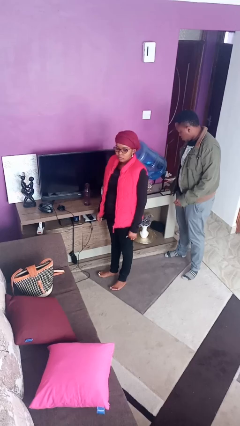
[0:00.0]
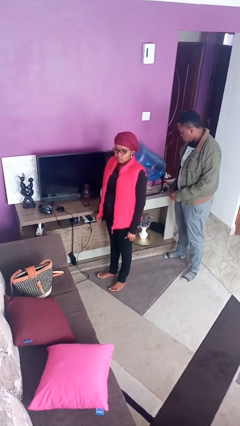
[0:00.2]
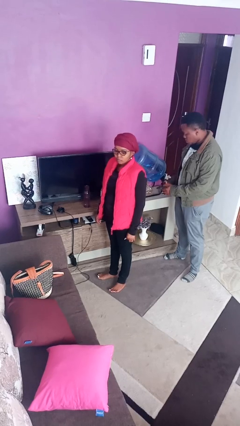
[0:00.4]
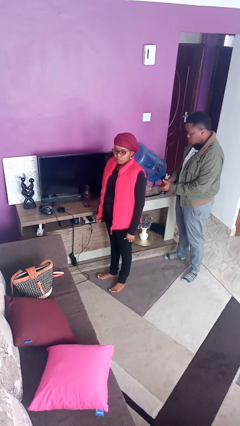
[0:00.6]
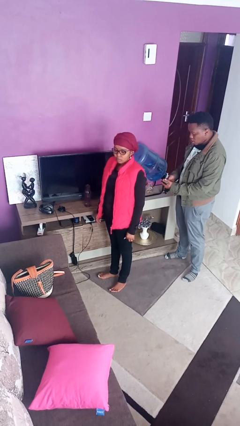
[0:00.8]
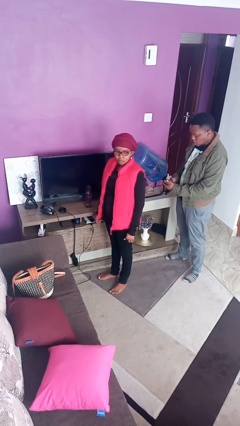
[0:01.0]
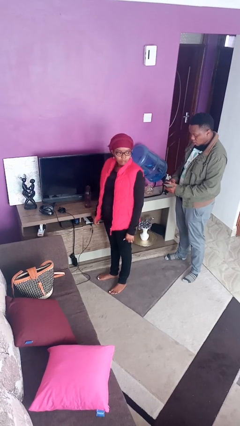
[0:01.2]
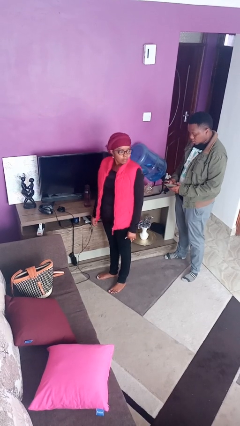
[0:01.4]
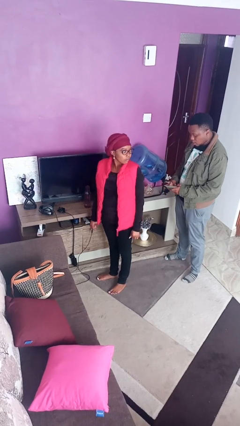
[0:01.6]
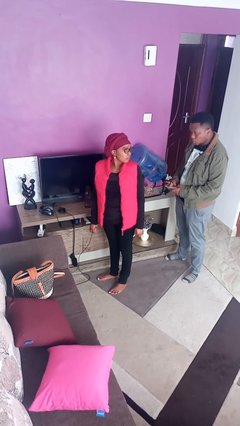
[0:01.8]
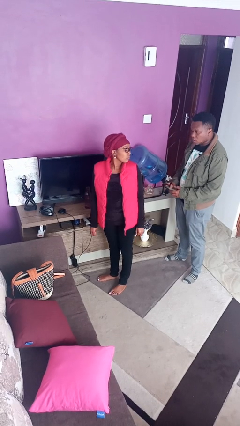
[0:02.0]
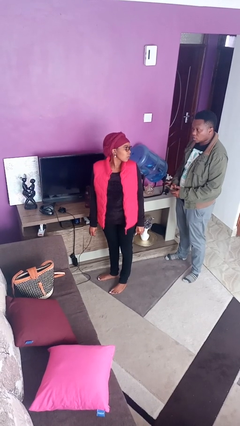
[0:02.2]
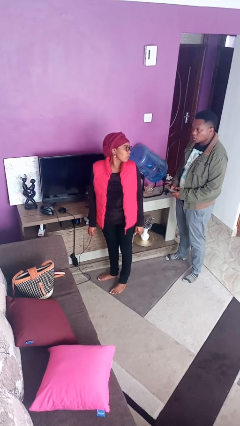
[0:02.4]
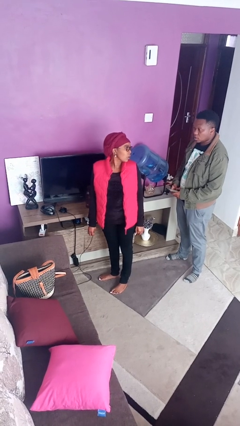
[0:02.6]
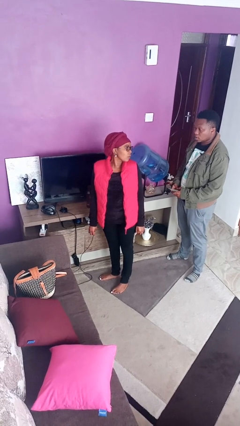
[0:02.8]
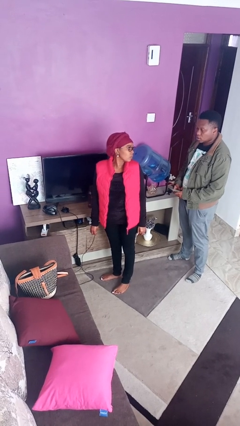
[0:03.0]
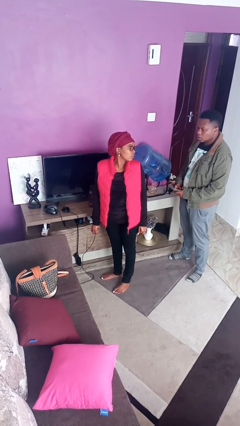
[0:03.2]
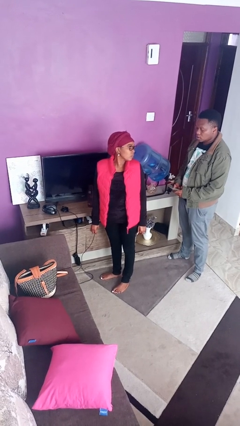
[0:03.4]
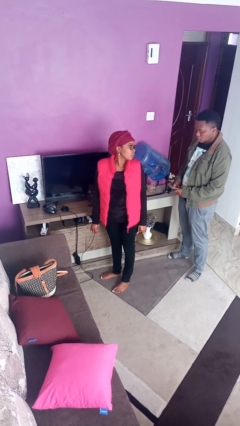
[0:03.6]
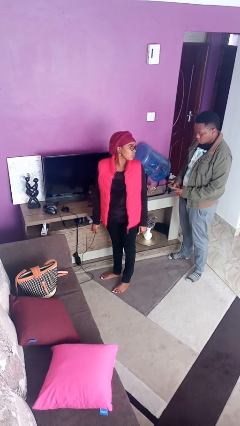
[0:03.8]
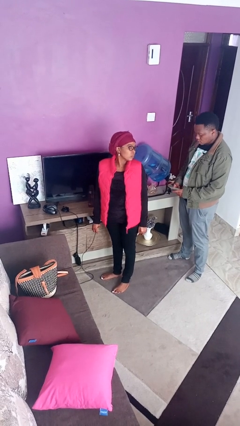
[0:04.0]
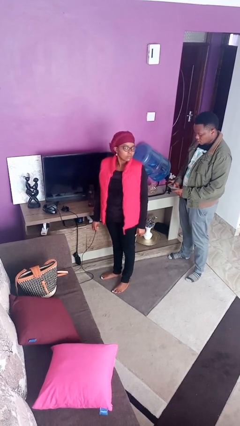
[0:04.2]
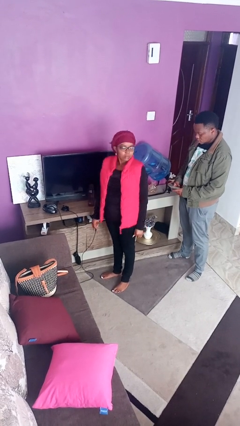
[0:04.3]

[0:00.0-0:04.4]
person looks over shoulder

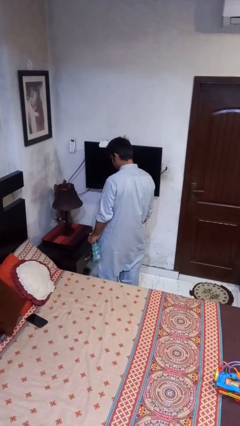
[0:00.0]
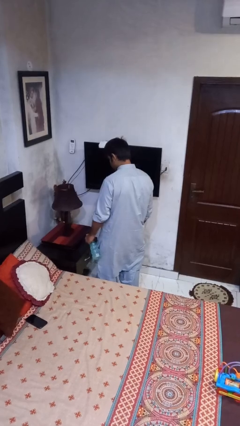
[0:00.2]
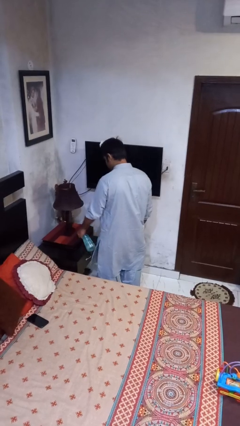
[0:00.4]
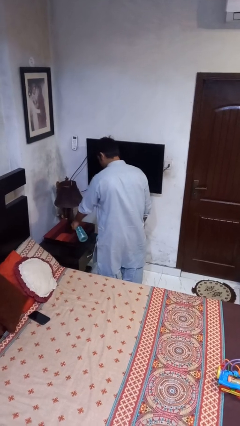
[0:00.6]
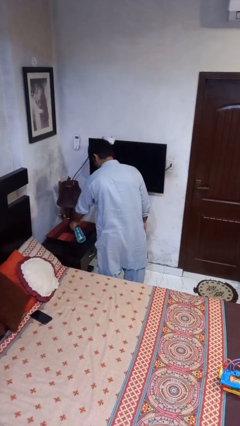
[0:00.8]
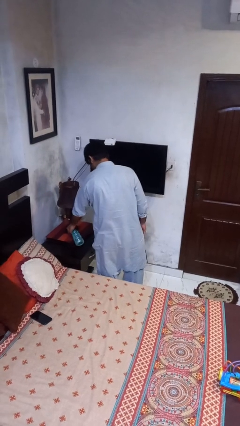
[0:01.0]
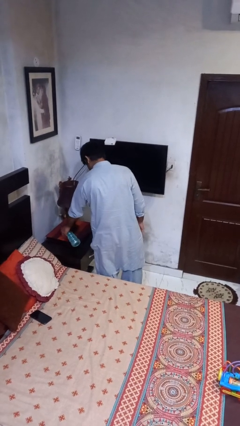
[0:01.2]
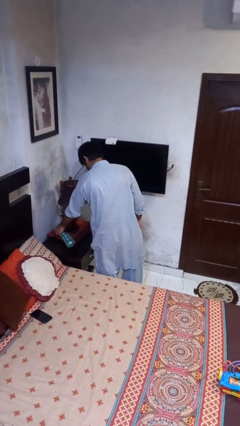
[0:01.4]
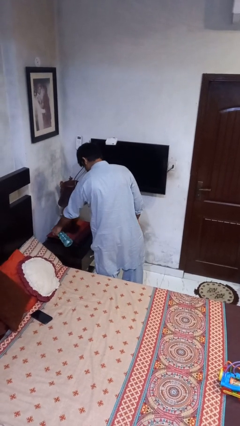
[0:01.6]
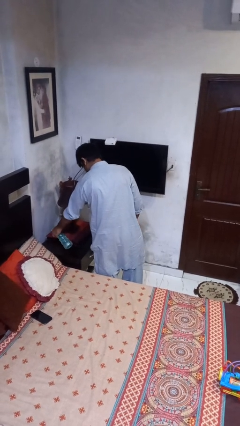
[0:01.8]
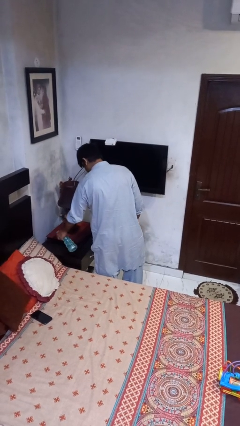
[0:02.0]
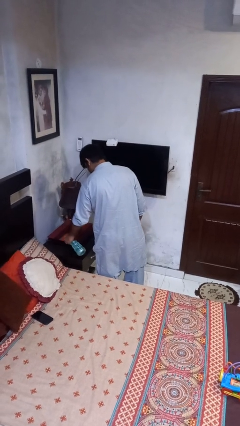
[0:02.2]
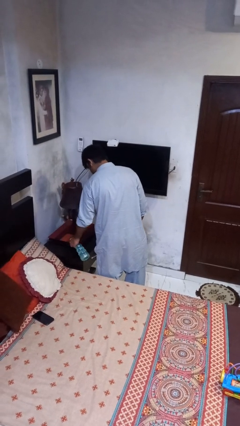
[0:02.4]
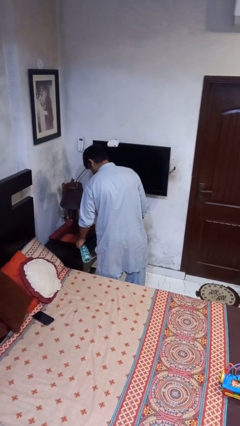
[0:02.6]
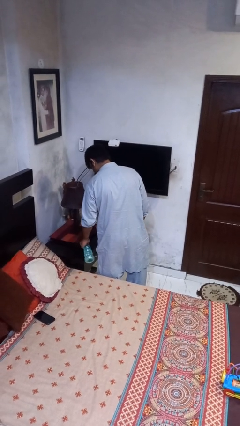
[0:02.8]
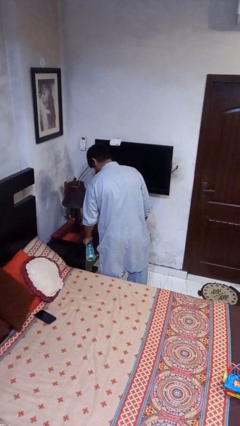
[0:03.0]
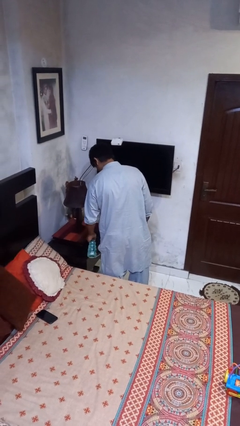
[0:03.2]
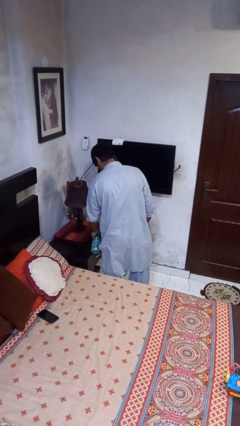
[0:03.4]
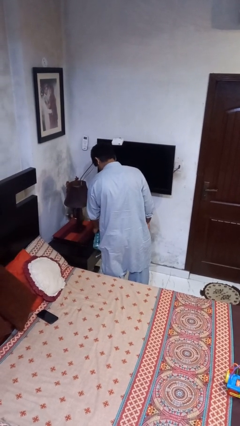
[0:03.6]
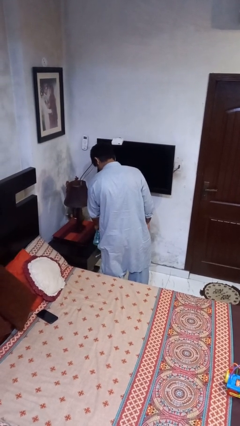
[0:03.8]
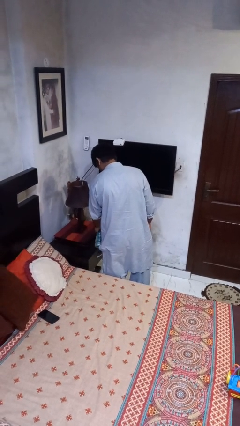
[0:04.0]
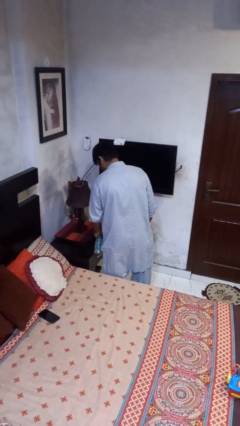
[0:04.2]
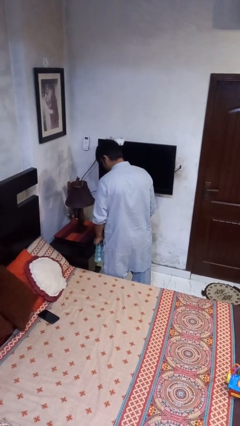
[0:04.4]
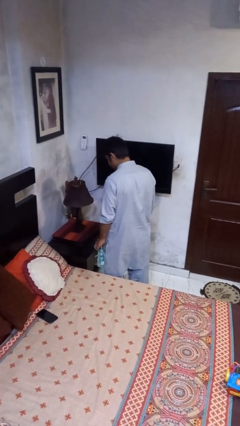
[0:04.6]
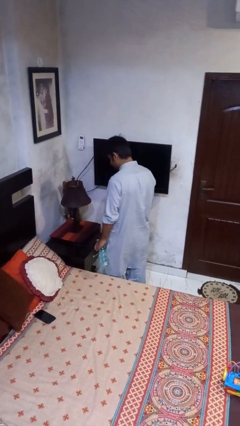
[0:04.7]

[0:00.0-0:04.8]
person sprays from bottle

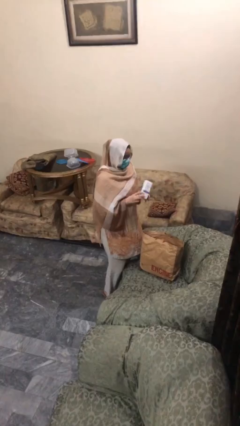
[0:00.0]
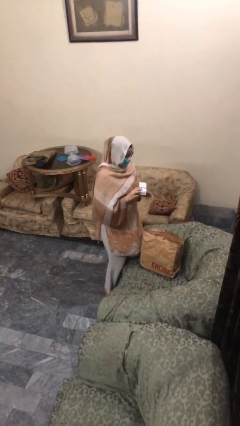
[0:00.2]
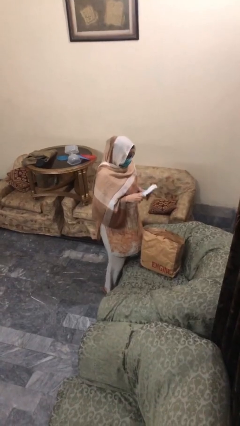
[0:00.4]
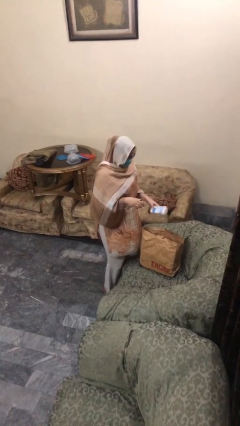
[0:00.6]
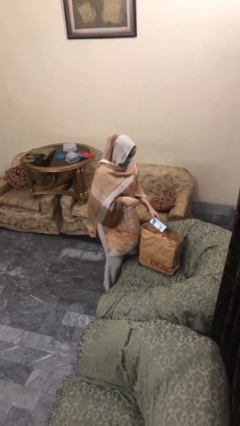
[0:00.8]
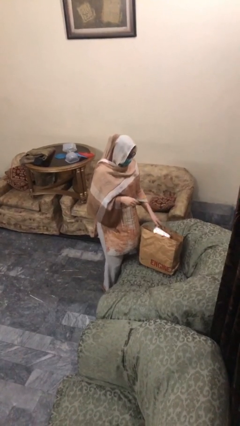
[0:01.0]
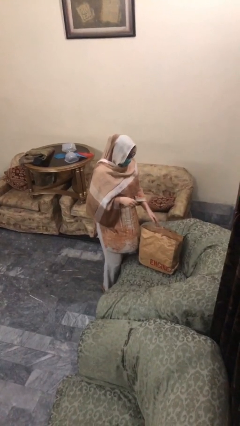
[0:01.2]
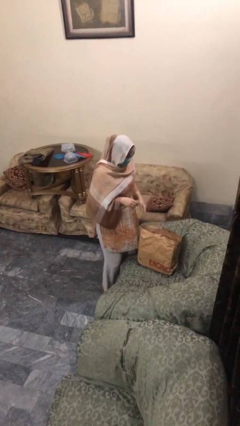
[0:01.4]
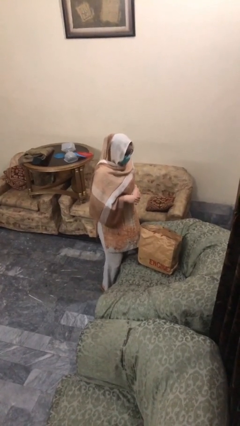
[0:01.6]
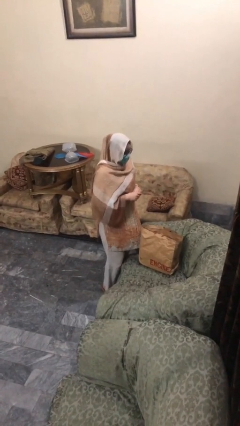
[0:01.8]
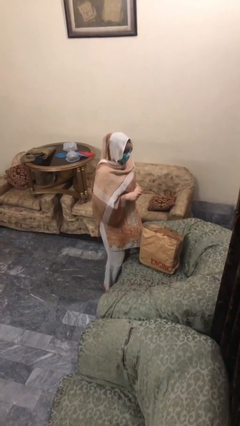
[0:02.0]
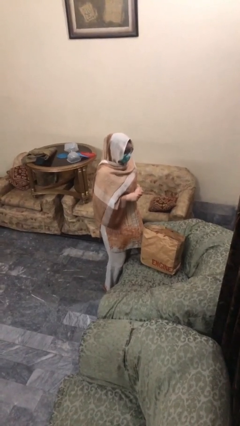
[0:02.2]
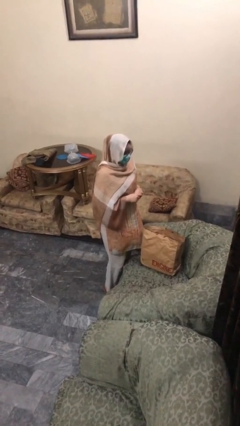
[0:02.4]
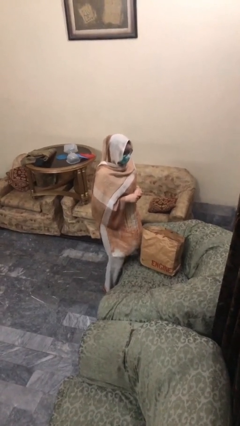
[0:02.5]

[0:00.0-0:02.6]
person puts object into bag

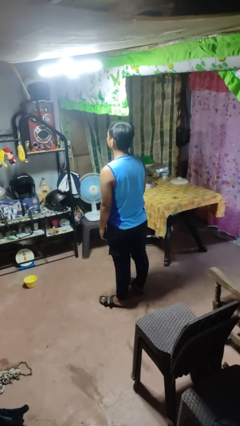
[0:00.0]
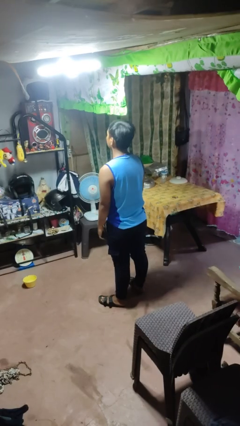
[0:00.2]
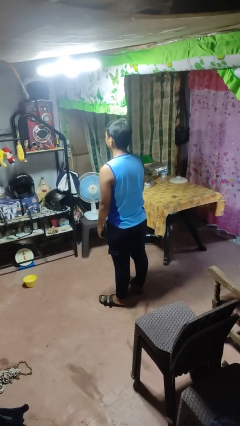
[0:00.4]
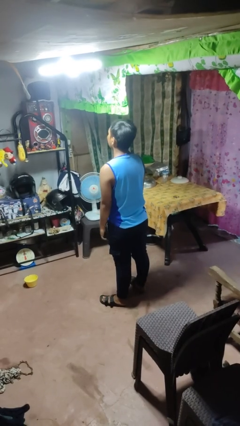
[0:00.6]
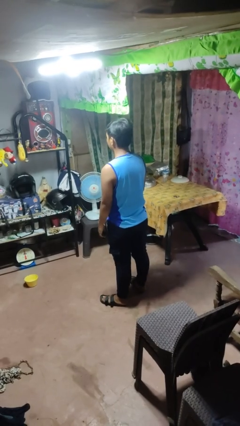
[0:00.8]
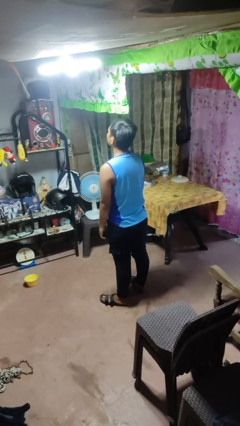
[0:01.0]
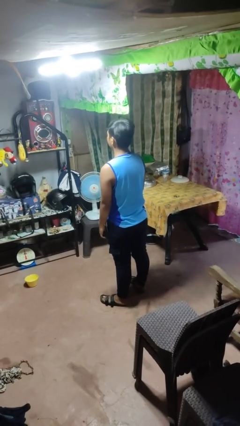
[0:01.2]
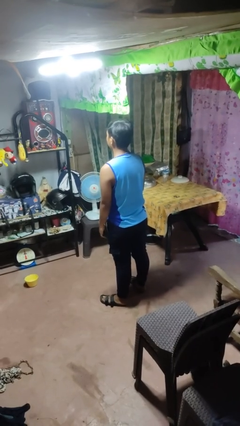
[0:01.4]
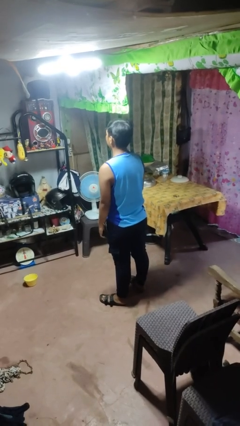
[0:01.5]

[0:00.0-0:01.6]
person nods head

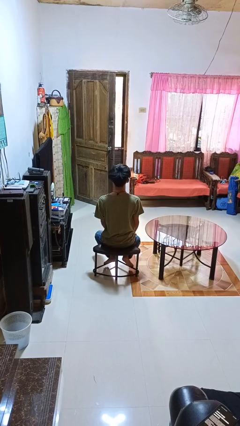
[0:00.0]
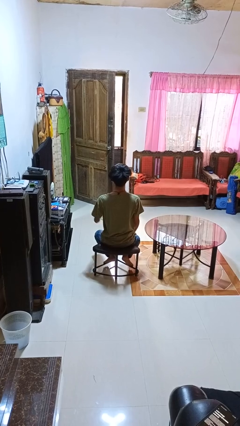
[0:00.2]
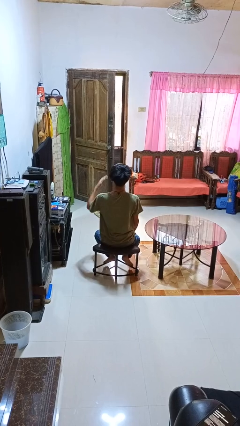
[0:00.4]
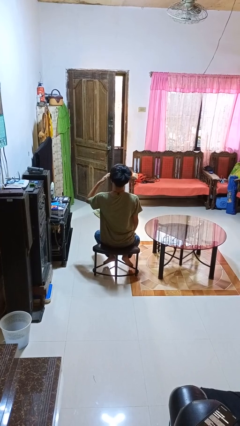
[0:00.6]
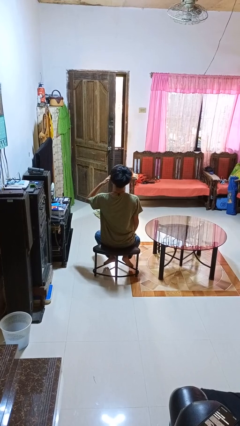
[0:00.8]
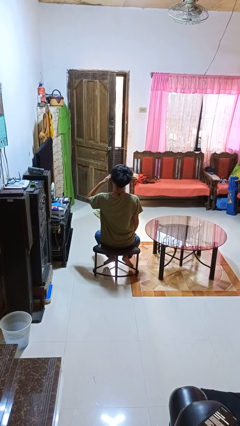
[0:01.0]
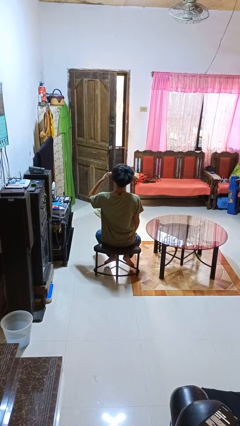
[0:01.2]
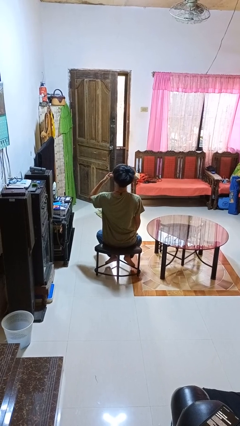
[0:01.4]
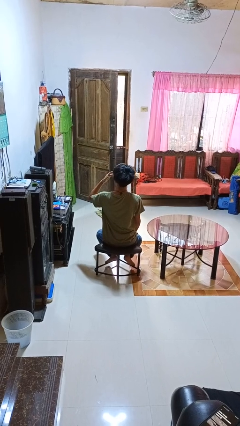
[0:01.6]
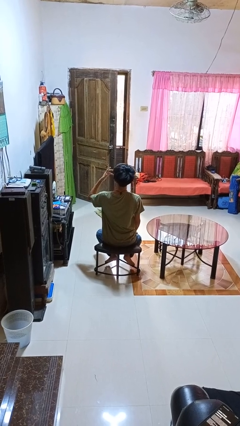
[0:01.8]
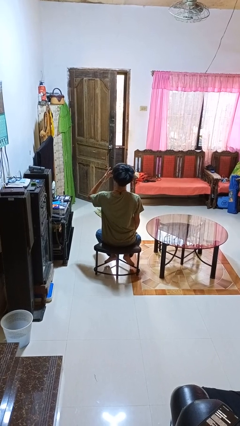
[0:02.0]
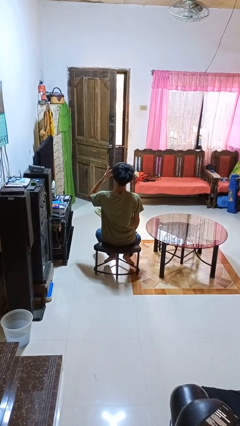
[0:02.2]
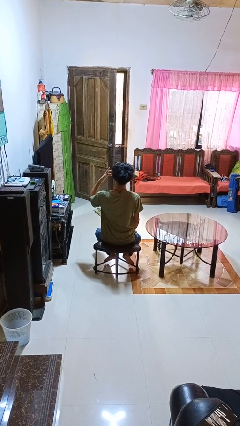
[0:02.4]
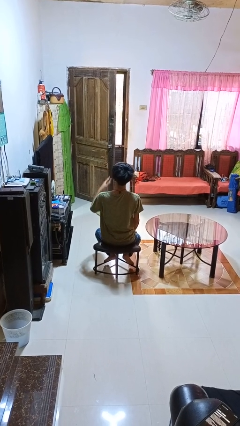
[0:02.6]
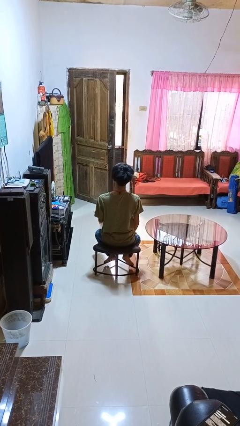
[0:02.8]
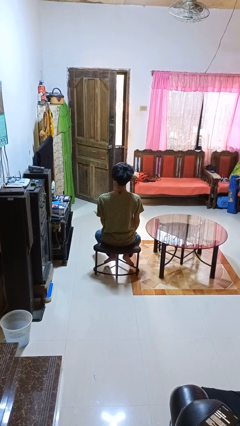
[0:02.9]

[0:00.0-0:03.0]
person licks fingers

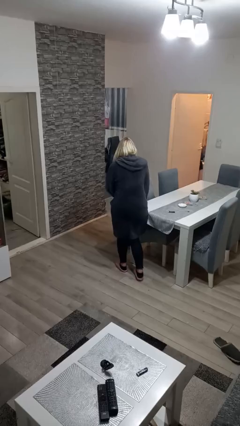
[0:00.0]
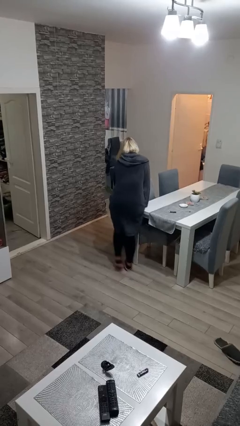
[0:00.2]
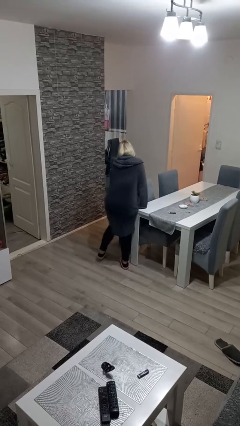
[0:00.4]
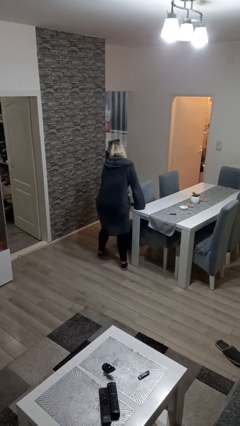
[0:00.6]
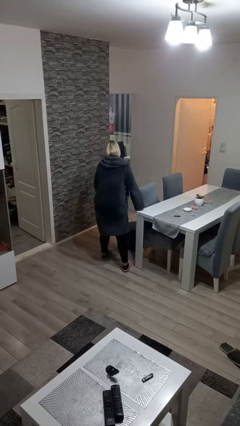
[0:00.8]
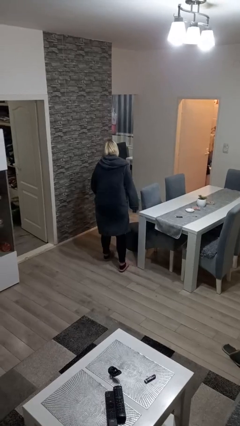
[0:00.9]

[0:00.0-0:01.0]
person bumps into table
